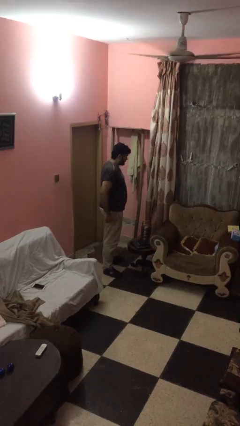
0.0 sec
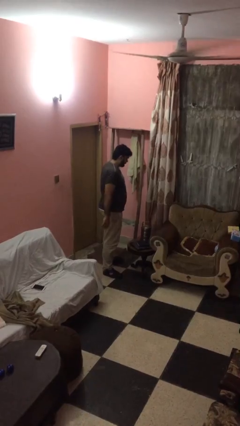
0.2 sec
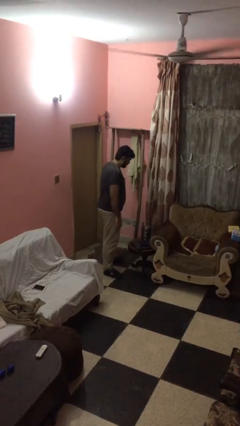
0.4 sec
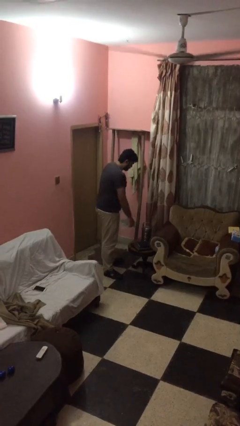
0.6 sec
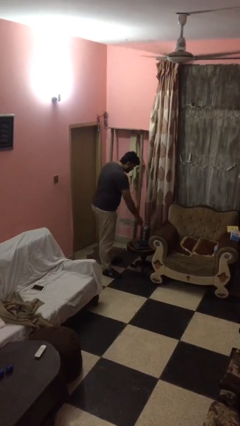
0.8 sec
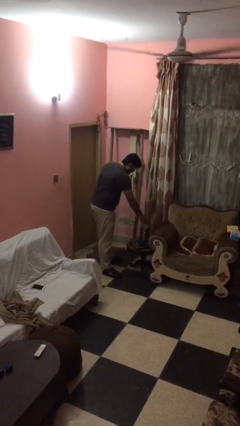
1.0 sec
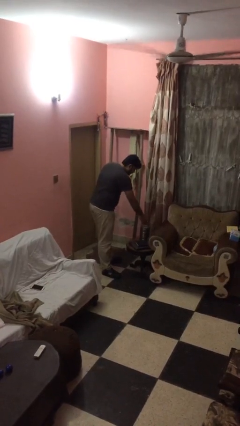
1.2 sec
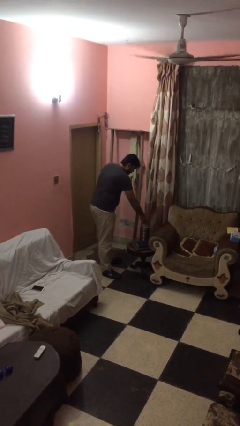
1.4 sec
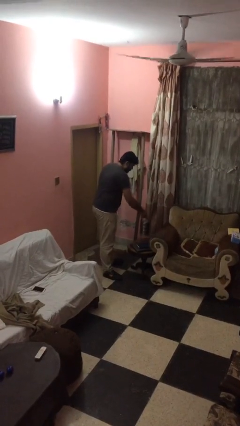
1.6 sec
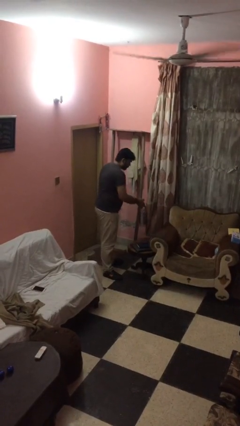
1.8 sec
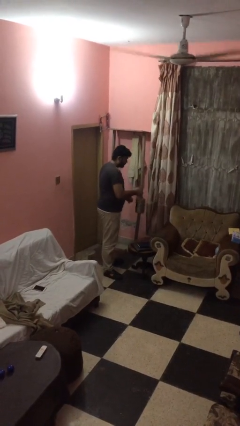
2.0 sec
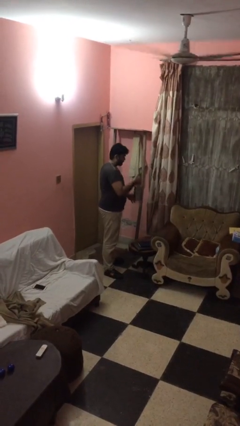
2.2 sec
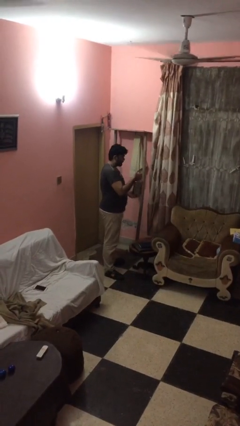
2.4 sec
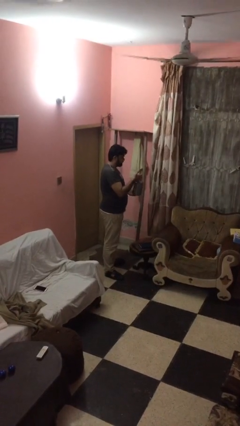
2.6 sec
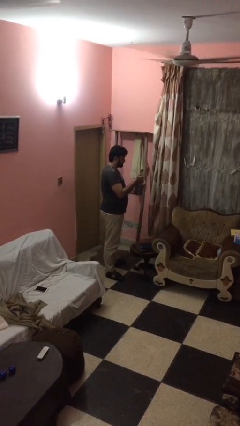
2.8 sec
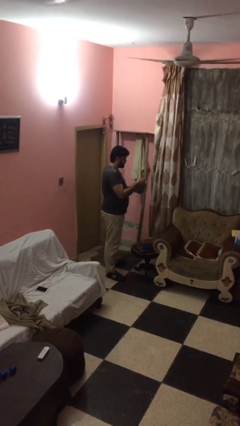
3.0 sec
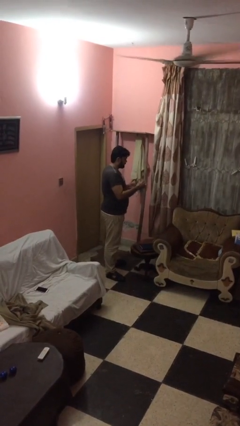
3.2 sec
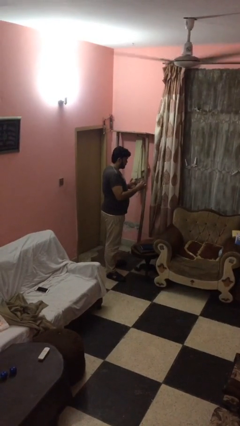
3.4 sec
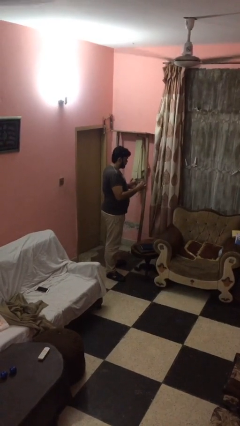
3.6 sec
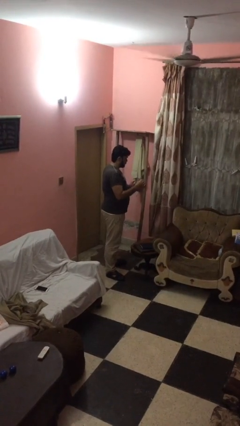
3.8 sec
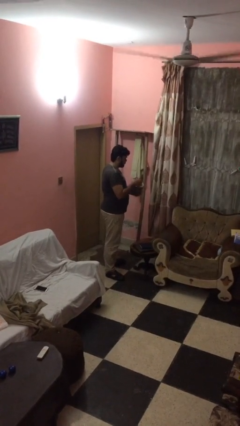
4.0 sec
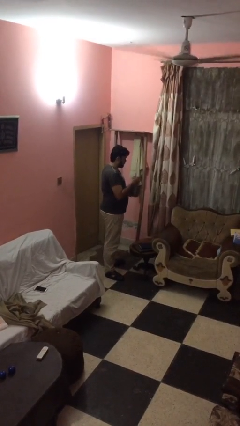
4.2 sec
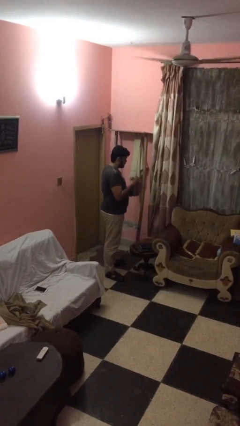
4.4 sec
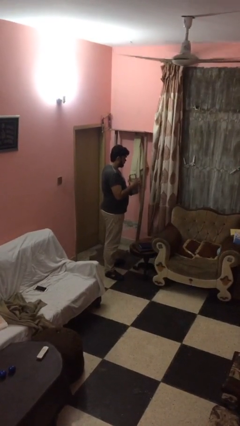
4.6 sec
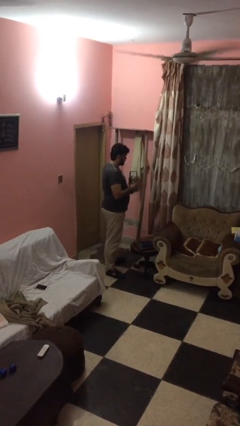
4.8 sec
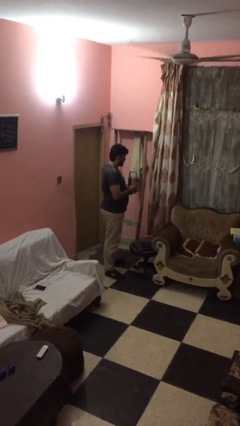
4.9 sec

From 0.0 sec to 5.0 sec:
person picks up object from table

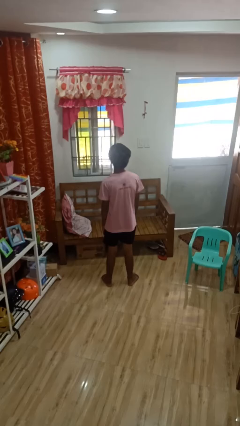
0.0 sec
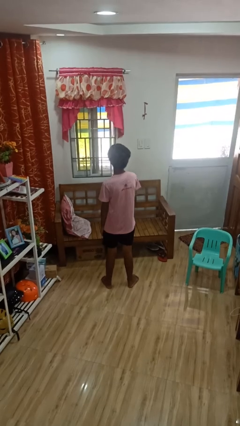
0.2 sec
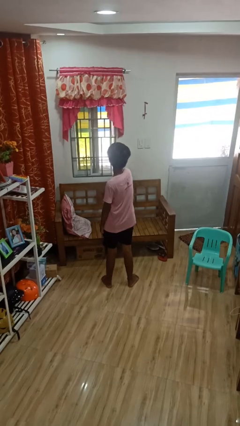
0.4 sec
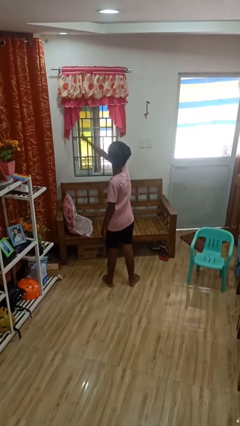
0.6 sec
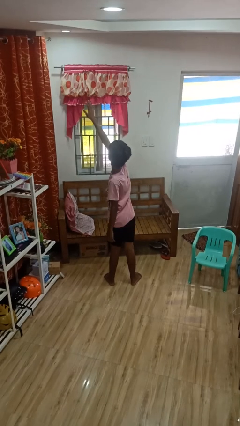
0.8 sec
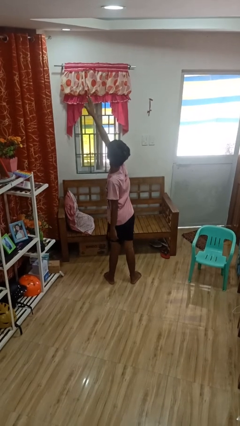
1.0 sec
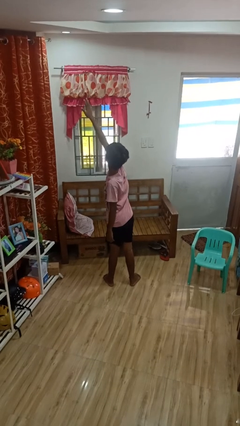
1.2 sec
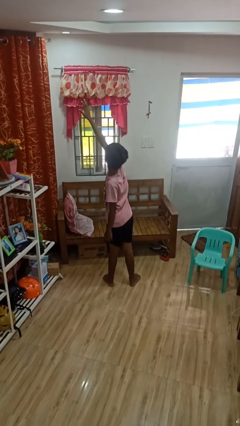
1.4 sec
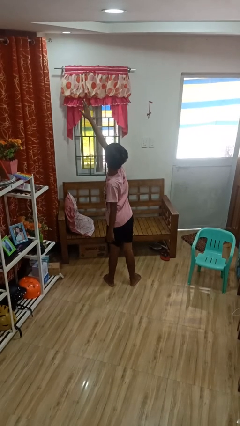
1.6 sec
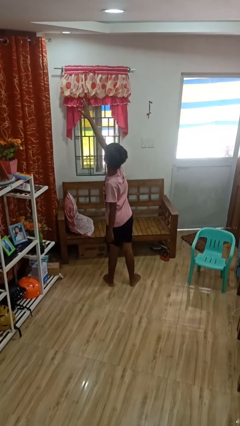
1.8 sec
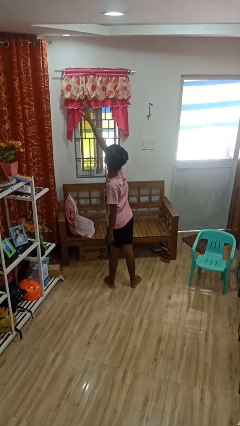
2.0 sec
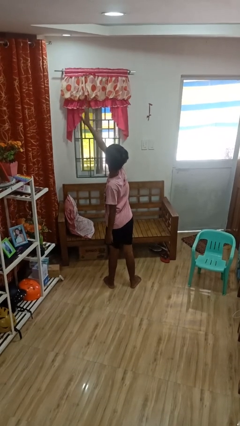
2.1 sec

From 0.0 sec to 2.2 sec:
person gestures stop

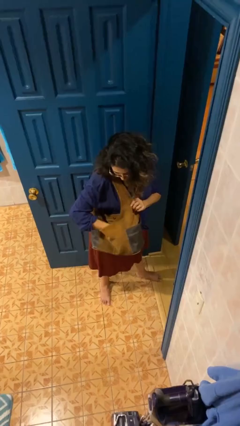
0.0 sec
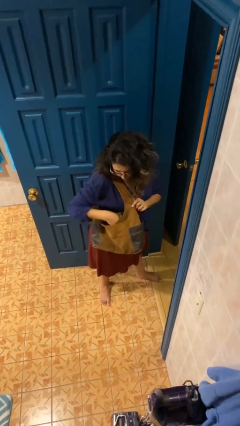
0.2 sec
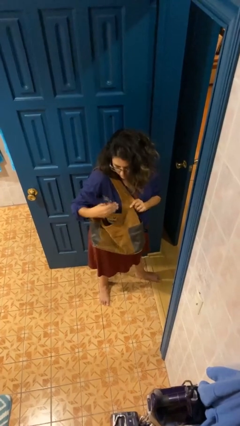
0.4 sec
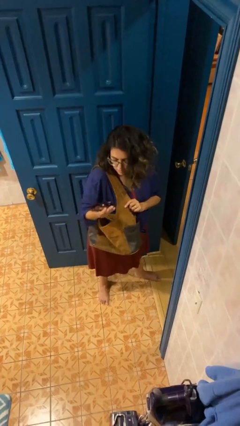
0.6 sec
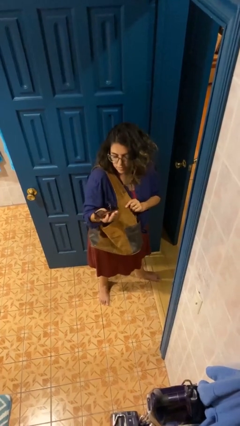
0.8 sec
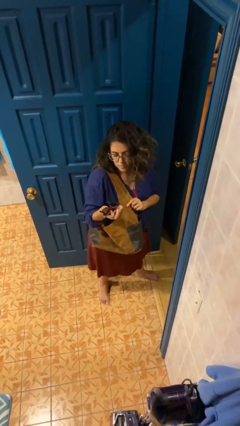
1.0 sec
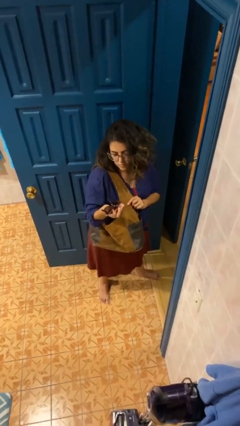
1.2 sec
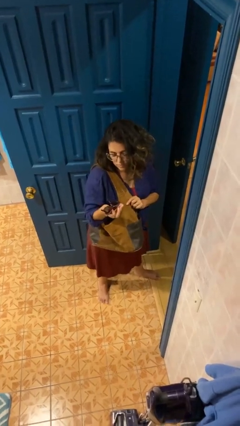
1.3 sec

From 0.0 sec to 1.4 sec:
person takes object from purse

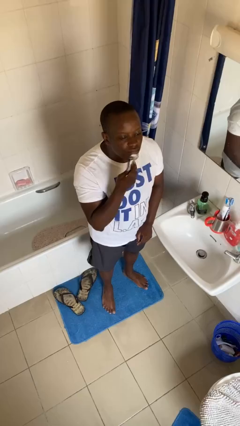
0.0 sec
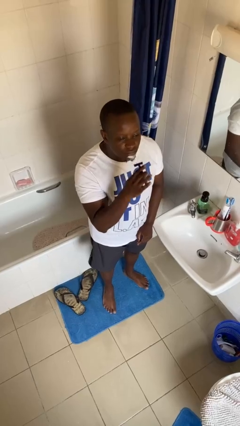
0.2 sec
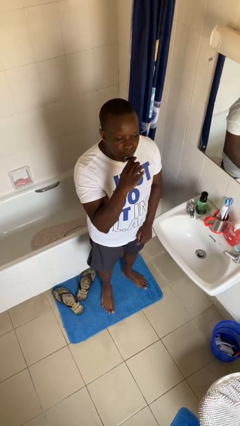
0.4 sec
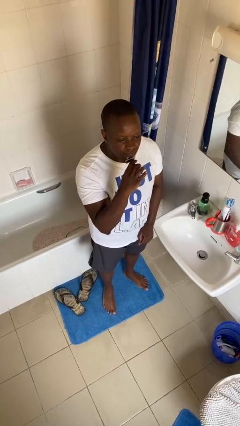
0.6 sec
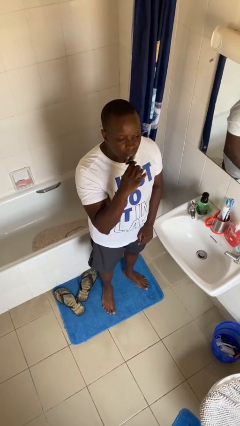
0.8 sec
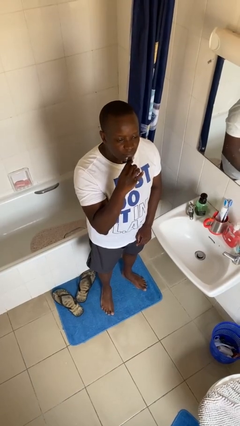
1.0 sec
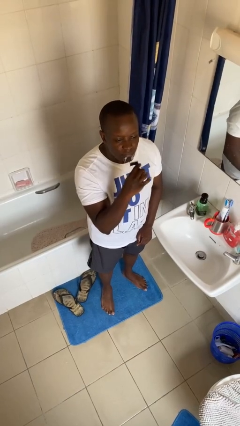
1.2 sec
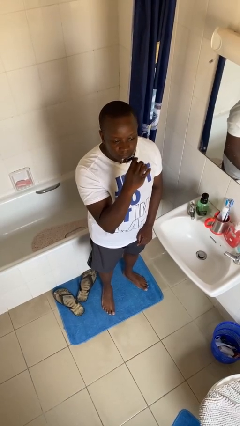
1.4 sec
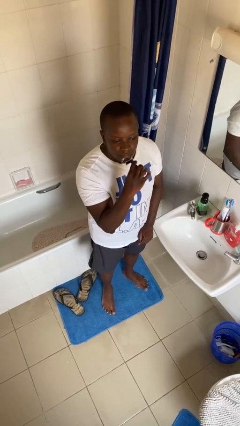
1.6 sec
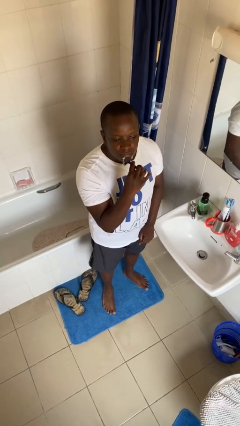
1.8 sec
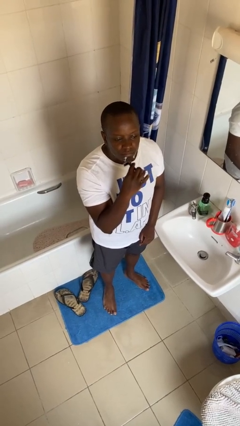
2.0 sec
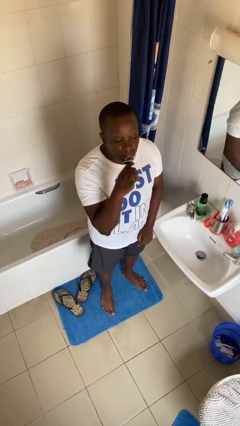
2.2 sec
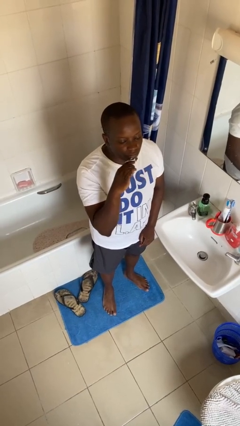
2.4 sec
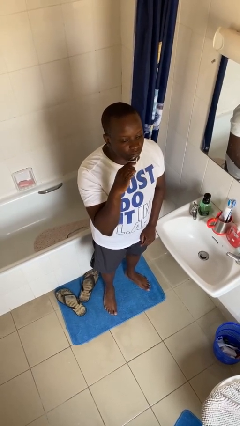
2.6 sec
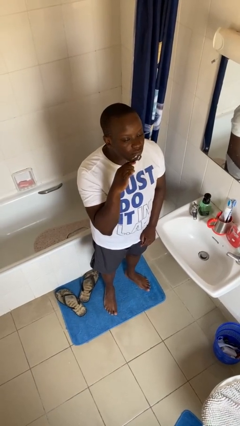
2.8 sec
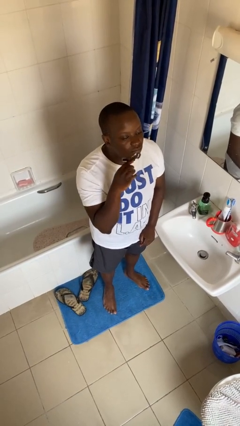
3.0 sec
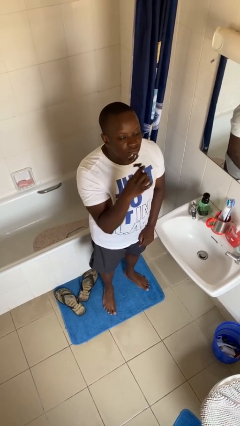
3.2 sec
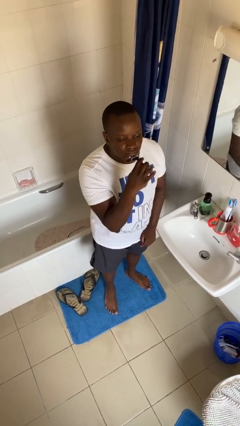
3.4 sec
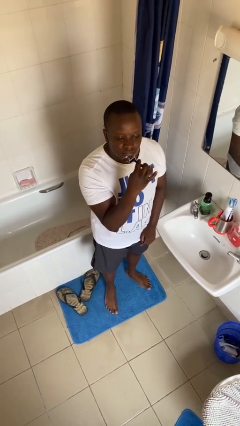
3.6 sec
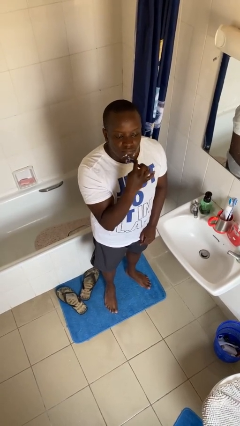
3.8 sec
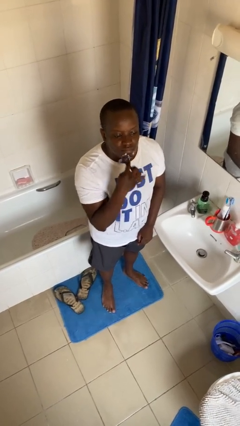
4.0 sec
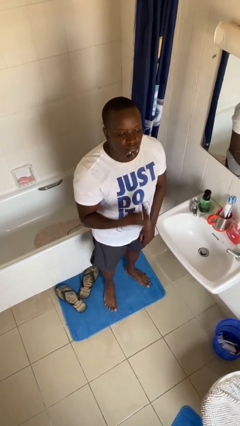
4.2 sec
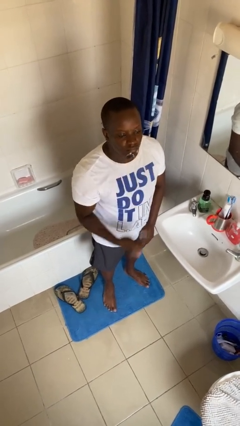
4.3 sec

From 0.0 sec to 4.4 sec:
person shaves face

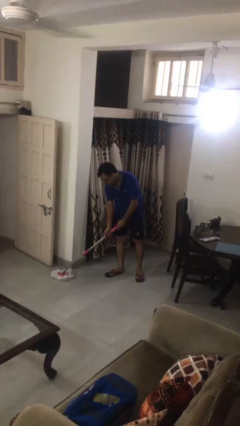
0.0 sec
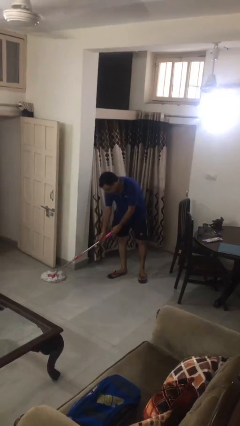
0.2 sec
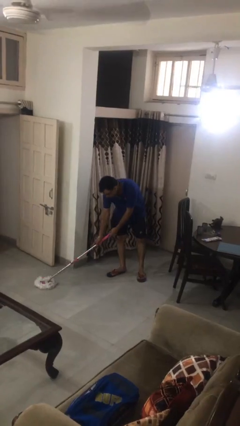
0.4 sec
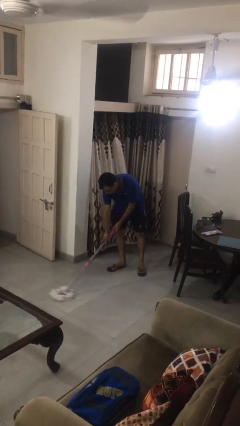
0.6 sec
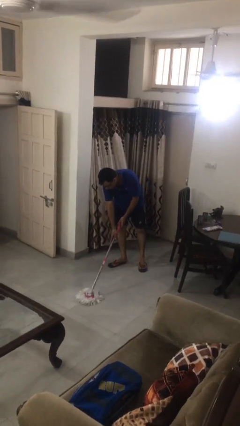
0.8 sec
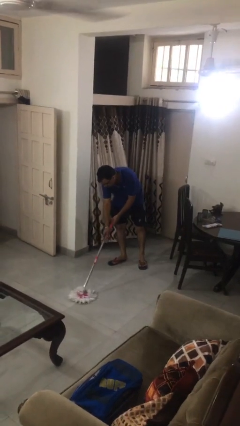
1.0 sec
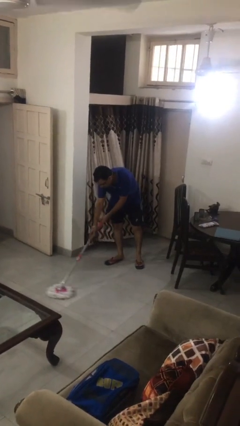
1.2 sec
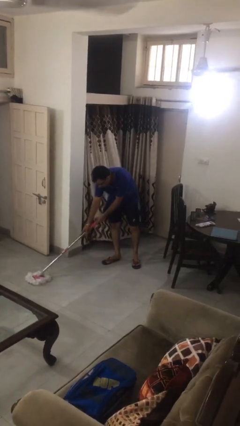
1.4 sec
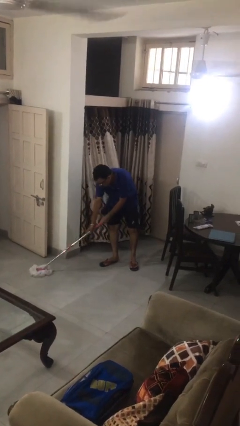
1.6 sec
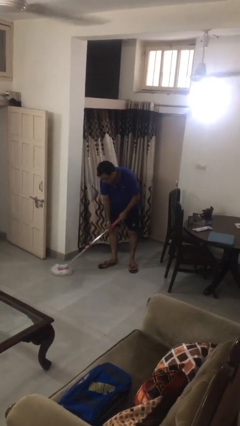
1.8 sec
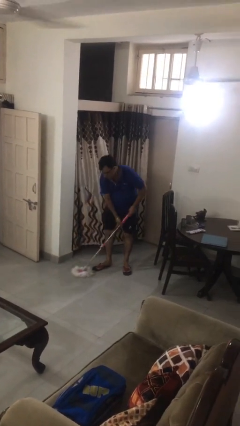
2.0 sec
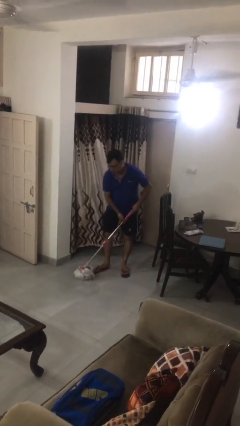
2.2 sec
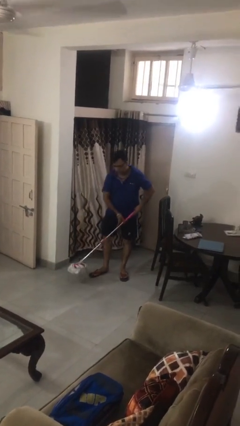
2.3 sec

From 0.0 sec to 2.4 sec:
person mops

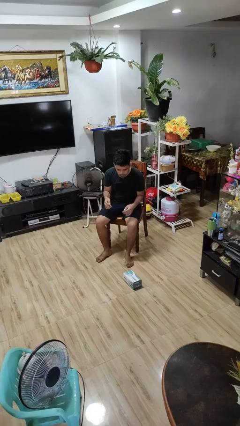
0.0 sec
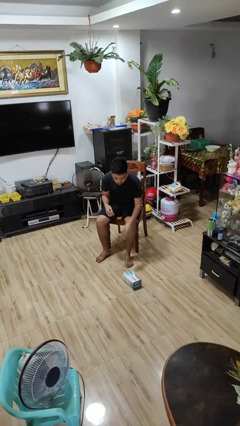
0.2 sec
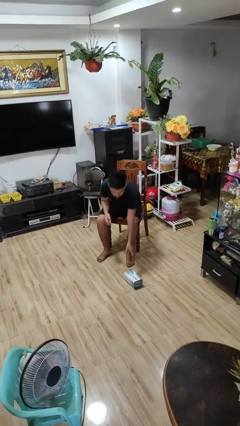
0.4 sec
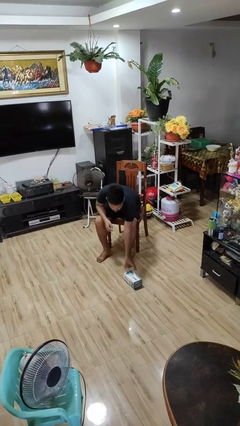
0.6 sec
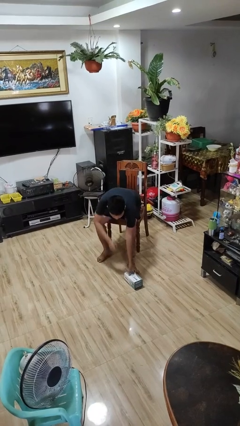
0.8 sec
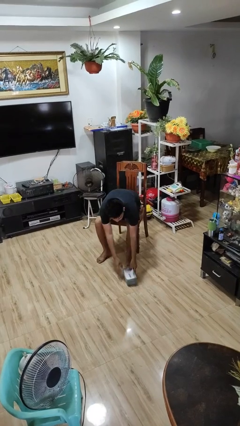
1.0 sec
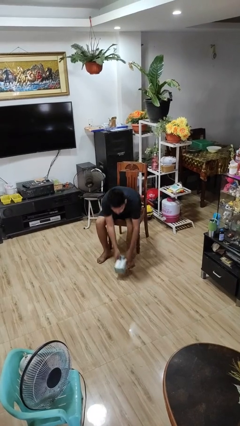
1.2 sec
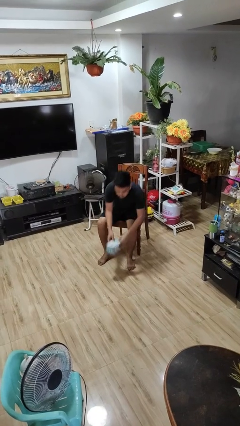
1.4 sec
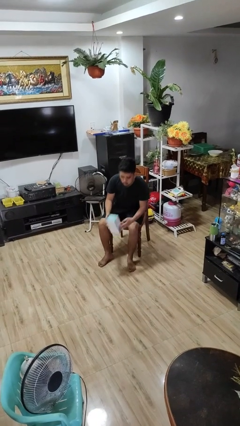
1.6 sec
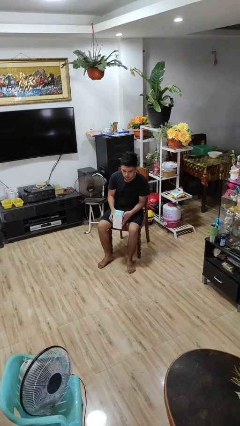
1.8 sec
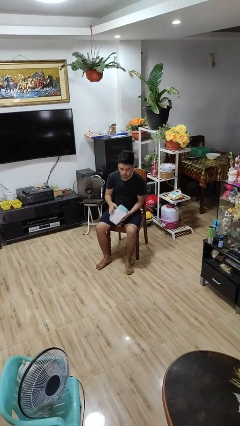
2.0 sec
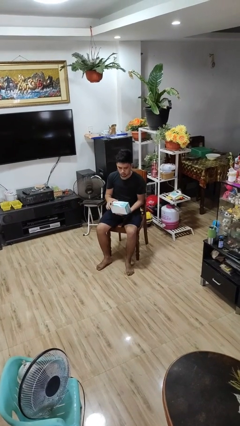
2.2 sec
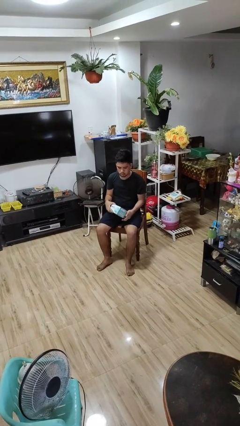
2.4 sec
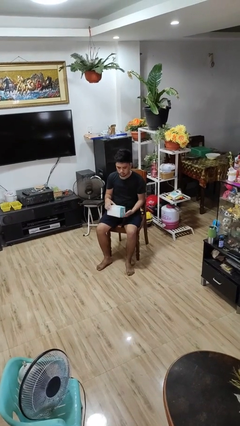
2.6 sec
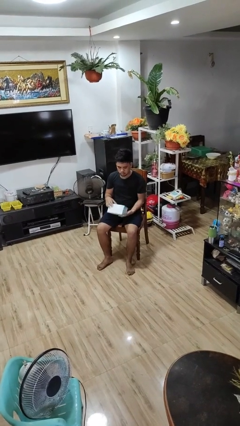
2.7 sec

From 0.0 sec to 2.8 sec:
person picks up object from floor
